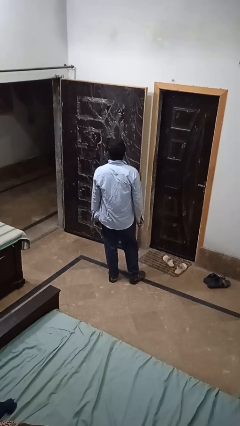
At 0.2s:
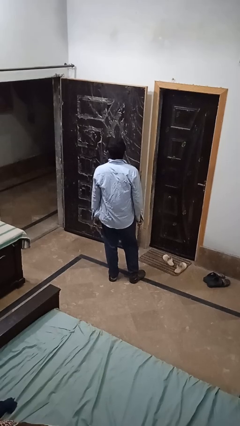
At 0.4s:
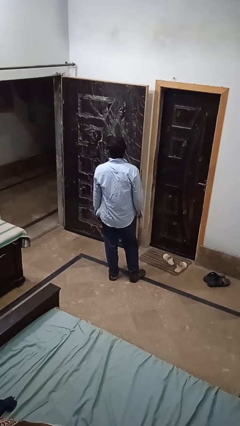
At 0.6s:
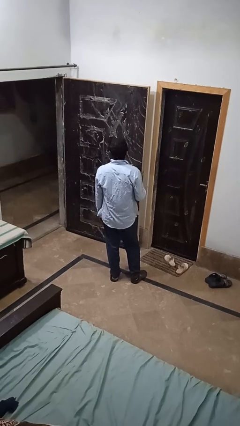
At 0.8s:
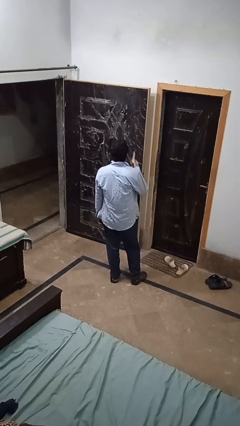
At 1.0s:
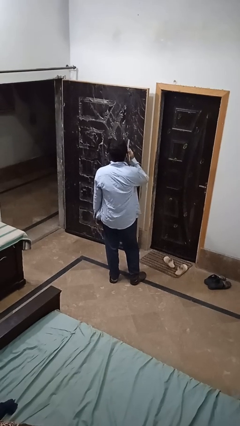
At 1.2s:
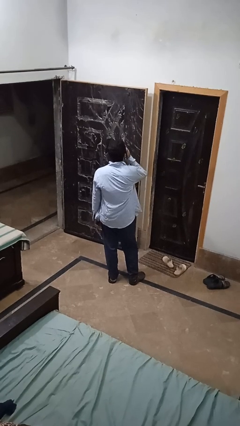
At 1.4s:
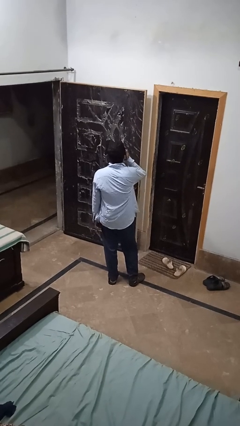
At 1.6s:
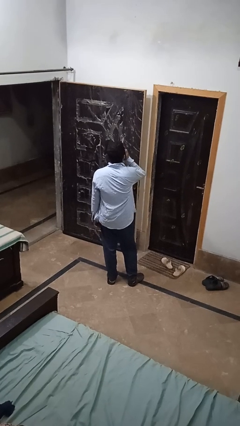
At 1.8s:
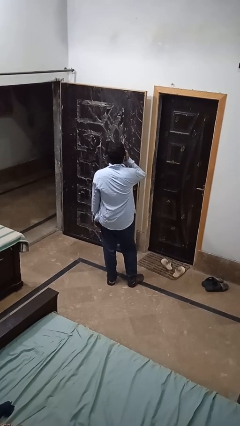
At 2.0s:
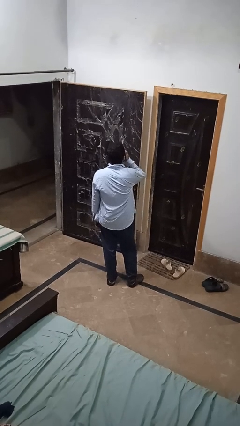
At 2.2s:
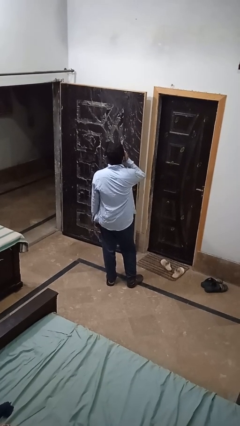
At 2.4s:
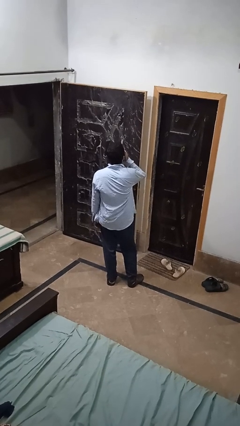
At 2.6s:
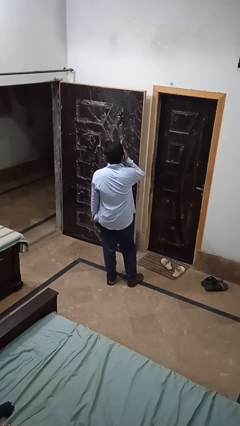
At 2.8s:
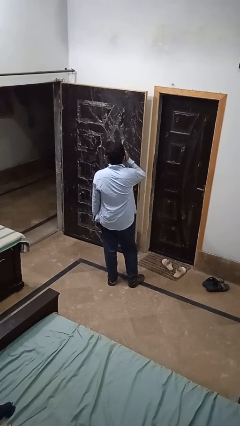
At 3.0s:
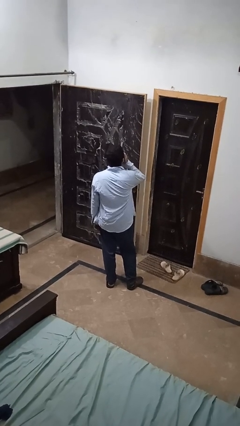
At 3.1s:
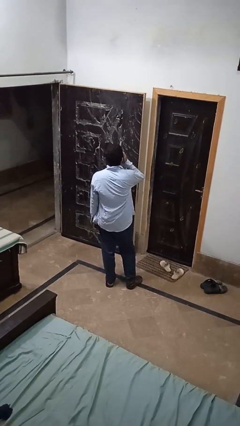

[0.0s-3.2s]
person vapes

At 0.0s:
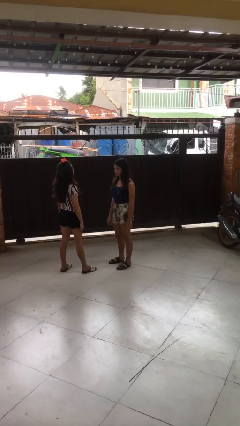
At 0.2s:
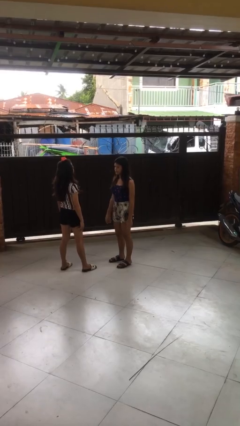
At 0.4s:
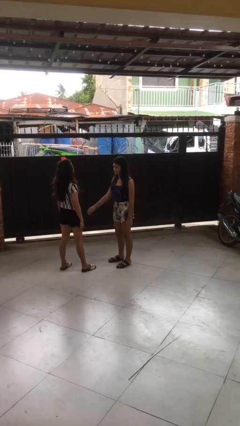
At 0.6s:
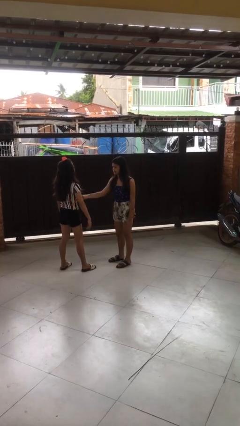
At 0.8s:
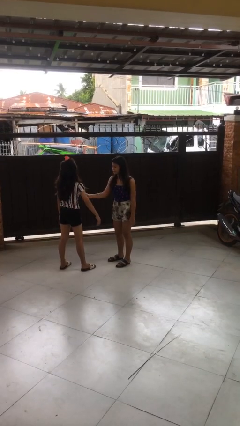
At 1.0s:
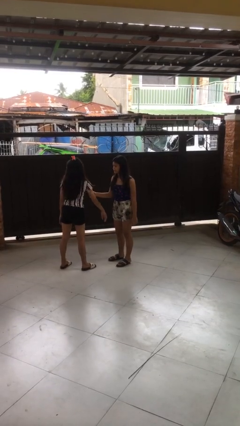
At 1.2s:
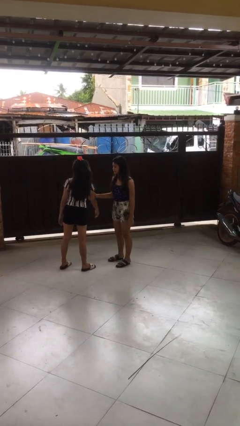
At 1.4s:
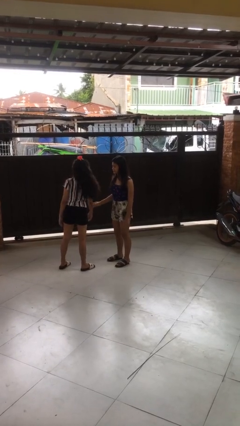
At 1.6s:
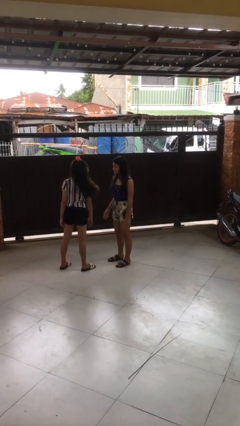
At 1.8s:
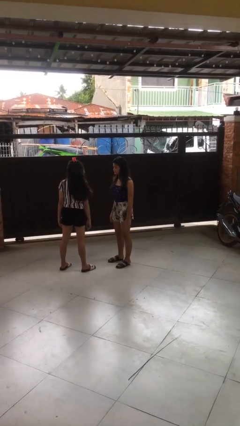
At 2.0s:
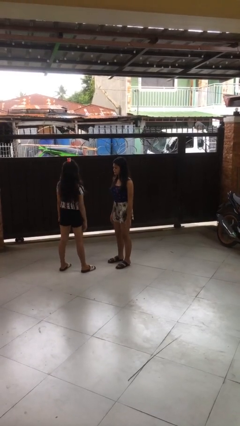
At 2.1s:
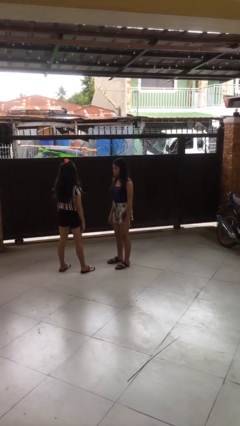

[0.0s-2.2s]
person grabs person by bicep

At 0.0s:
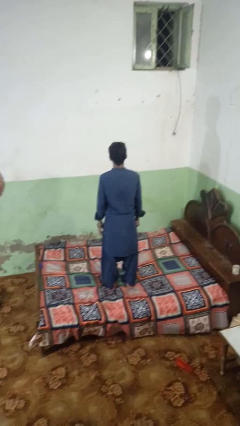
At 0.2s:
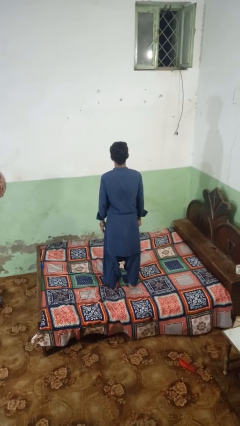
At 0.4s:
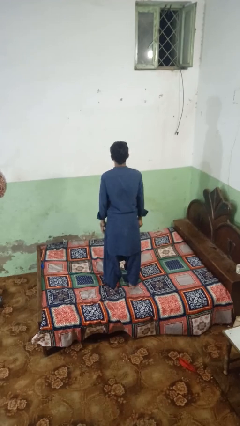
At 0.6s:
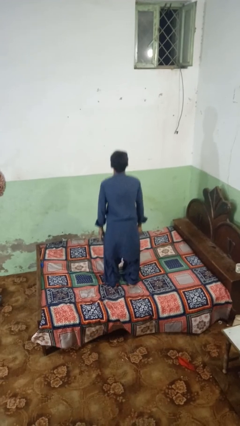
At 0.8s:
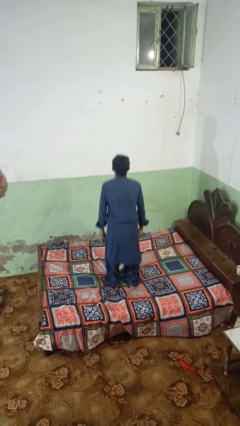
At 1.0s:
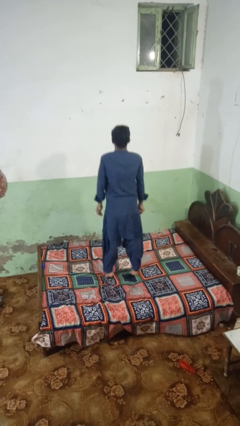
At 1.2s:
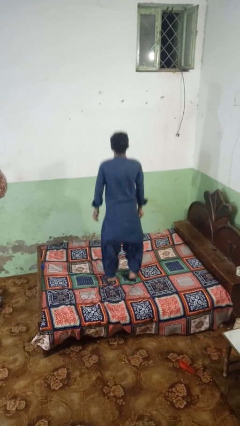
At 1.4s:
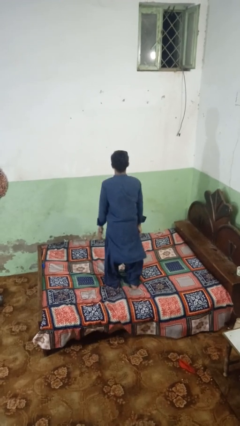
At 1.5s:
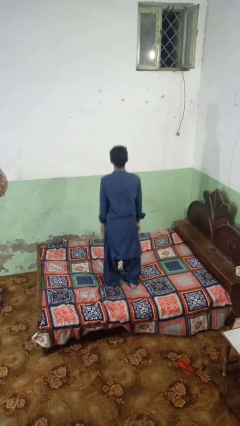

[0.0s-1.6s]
person jumps on bed

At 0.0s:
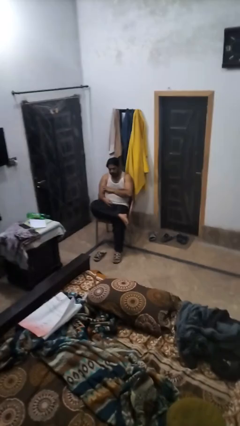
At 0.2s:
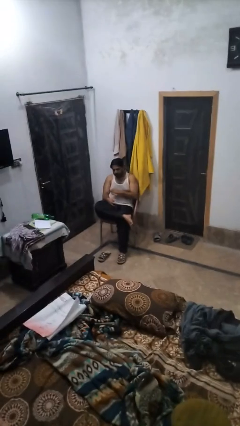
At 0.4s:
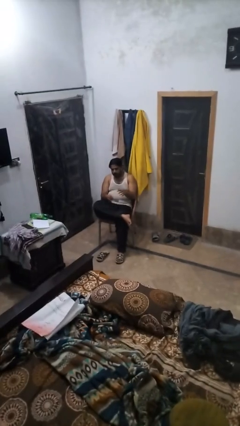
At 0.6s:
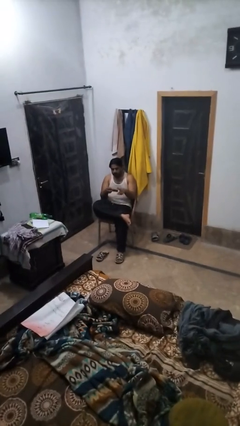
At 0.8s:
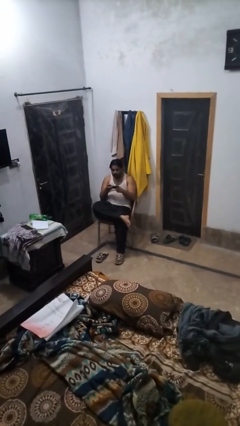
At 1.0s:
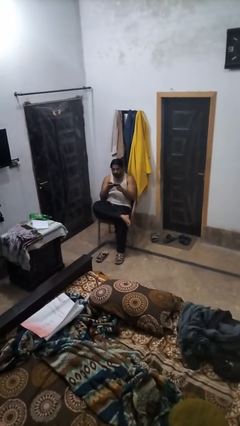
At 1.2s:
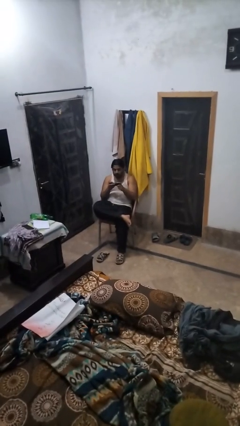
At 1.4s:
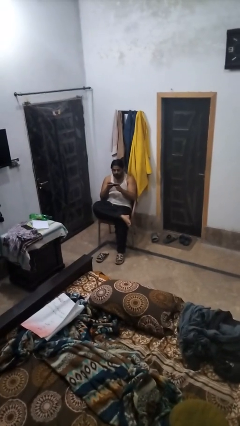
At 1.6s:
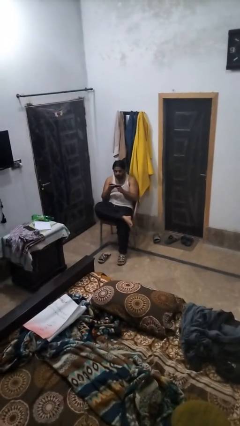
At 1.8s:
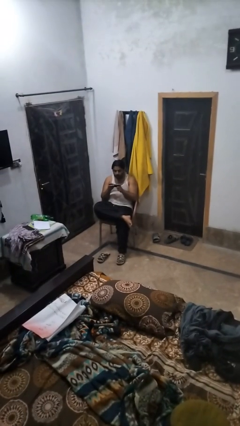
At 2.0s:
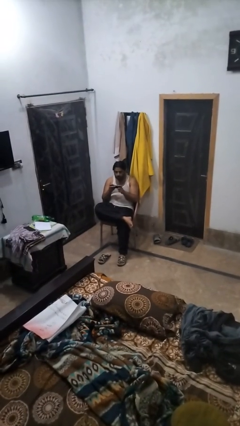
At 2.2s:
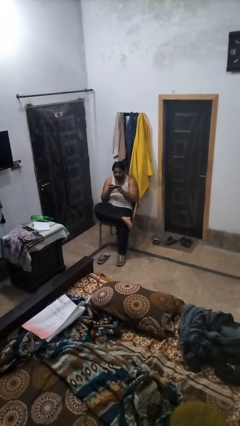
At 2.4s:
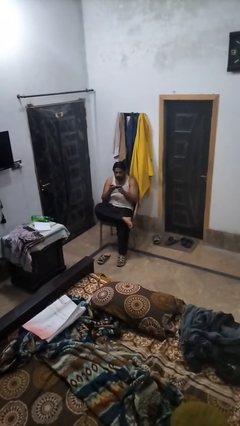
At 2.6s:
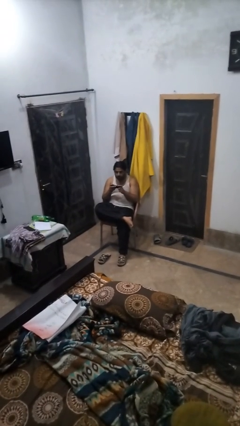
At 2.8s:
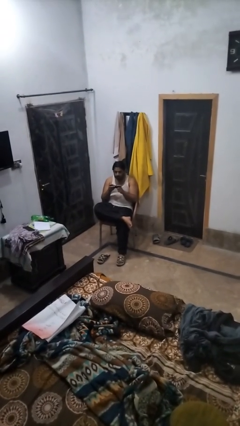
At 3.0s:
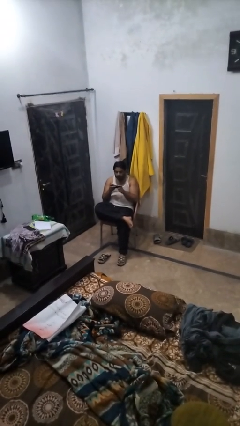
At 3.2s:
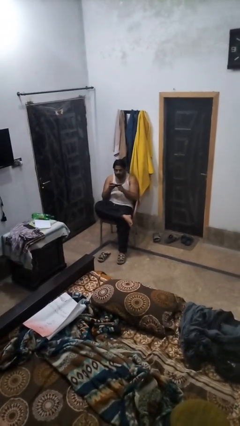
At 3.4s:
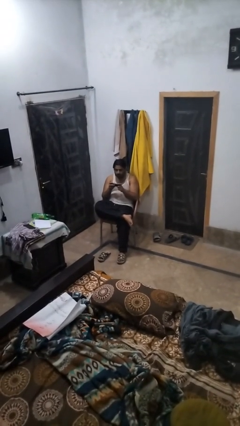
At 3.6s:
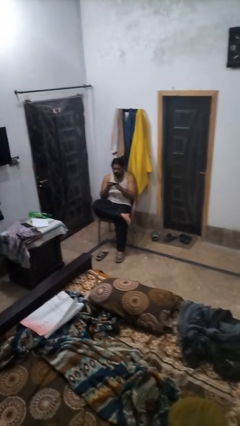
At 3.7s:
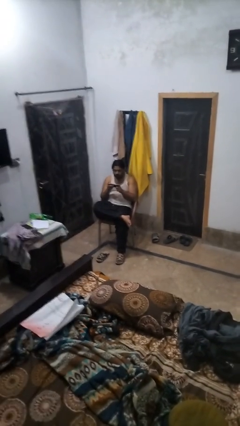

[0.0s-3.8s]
person interacts with handheld game

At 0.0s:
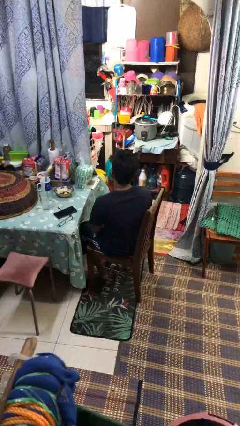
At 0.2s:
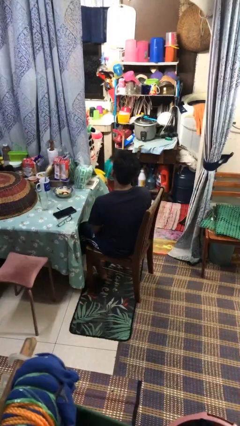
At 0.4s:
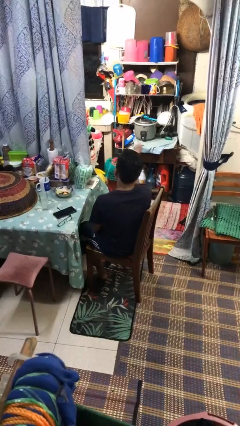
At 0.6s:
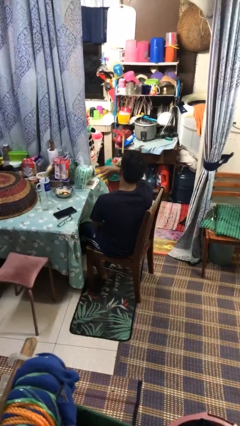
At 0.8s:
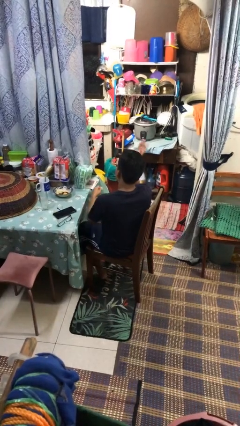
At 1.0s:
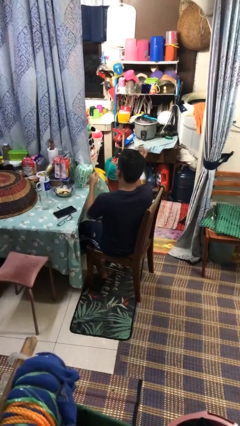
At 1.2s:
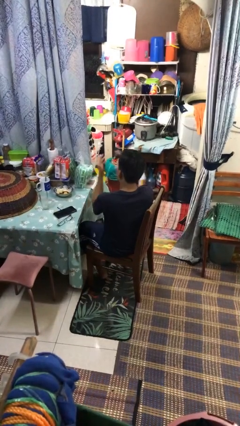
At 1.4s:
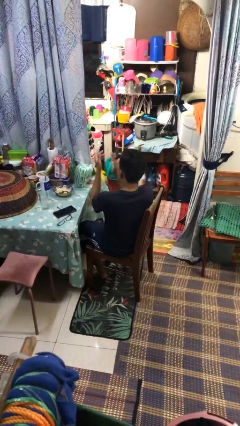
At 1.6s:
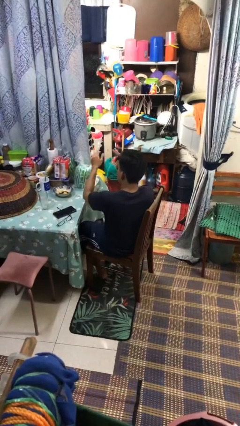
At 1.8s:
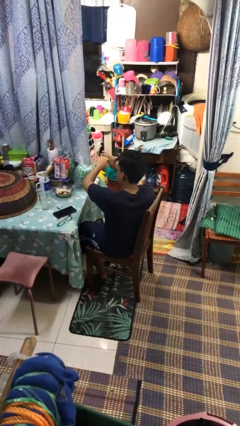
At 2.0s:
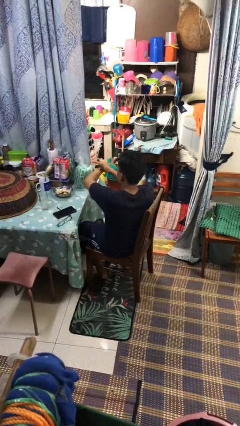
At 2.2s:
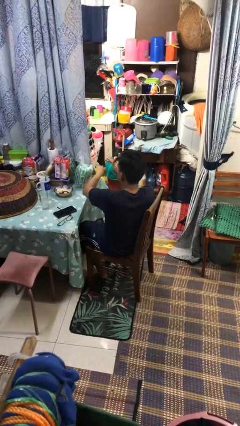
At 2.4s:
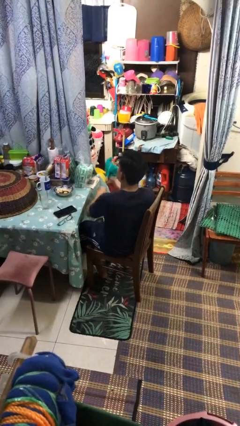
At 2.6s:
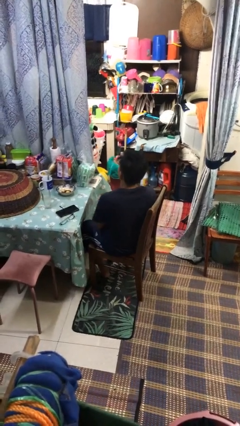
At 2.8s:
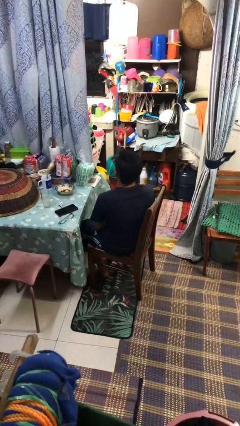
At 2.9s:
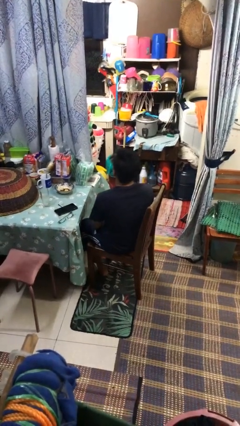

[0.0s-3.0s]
person swats bug

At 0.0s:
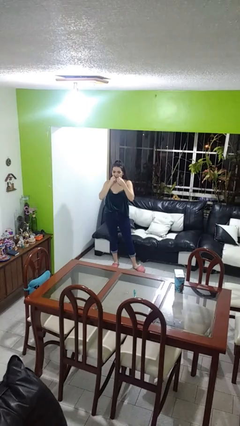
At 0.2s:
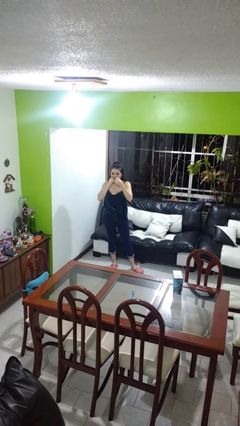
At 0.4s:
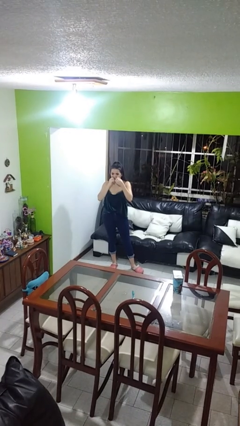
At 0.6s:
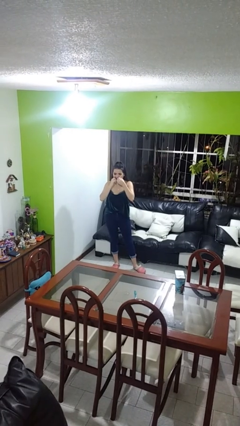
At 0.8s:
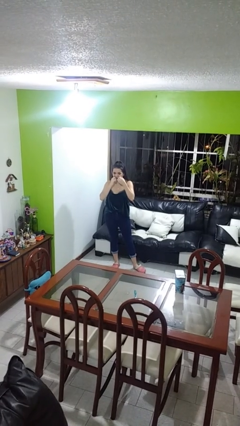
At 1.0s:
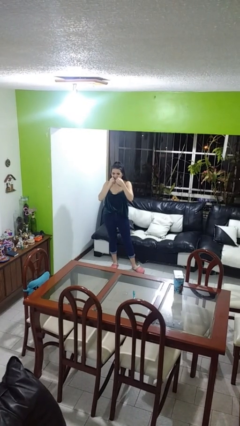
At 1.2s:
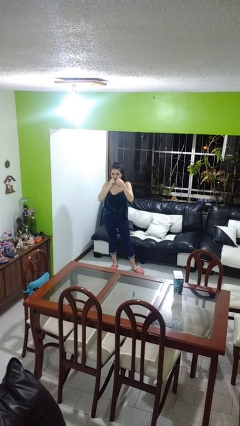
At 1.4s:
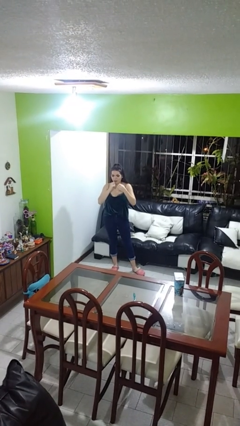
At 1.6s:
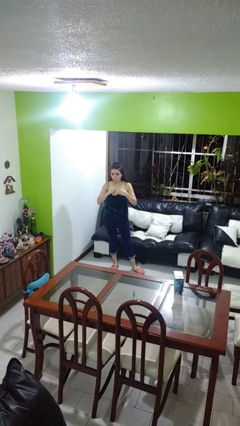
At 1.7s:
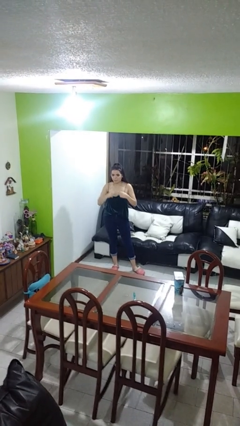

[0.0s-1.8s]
person flosses

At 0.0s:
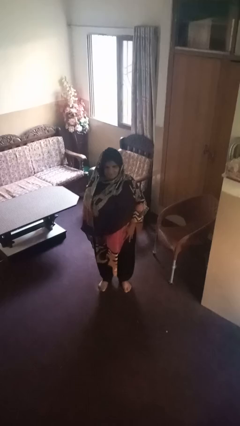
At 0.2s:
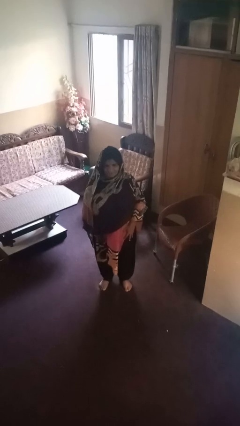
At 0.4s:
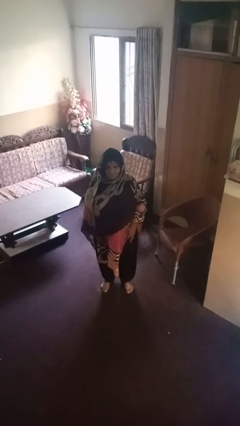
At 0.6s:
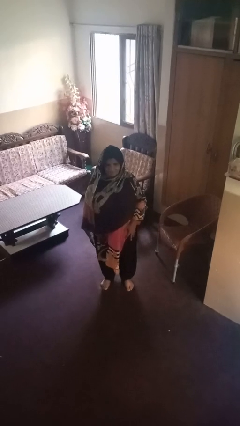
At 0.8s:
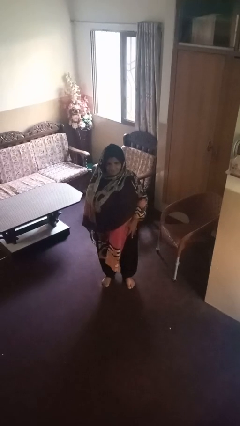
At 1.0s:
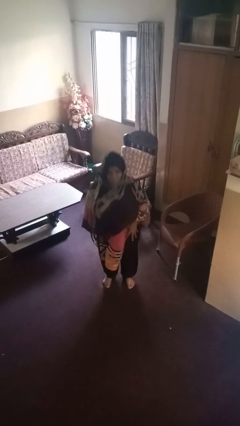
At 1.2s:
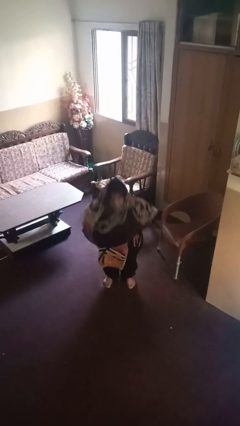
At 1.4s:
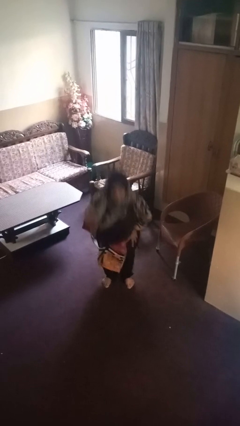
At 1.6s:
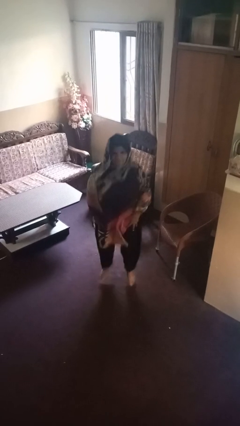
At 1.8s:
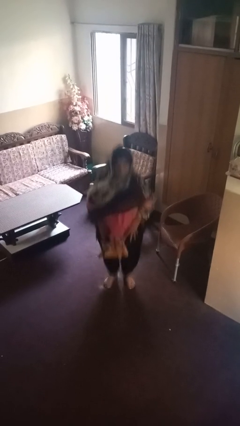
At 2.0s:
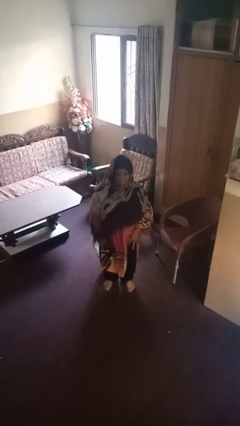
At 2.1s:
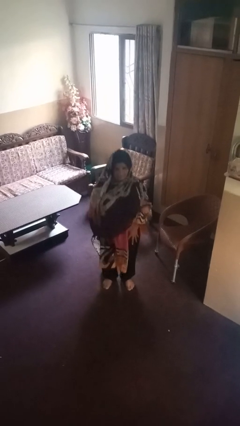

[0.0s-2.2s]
person jumps
